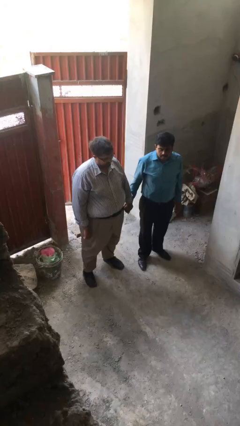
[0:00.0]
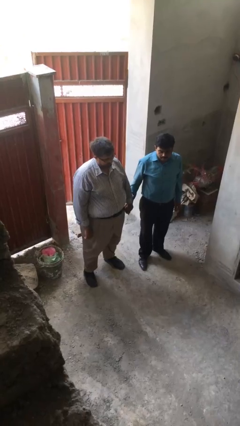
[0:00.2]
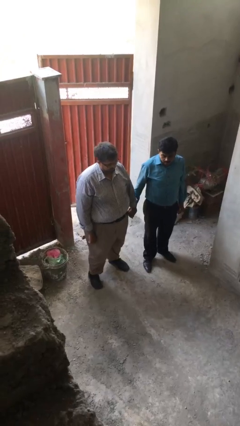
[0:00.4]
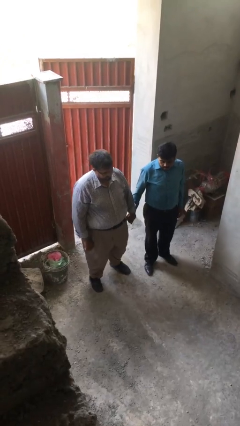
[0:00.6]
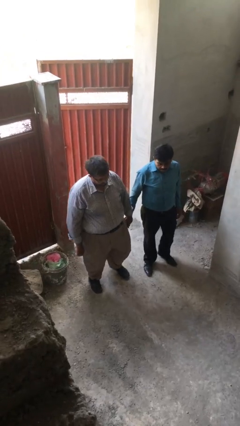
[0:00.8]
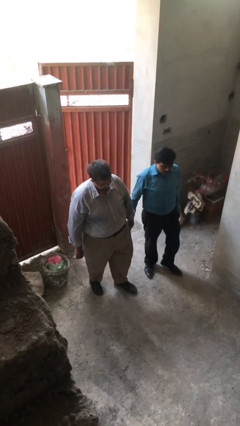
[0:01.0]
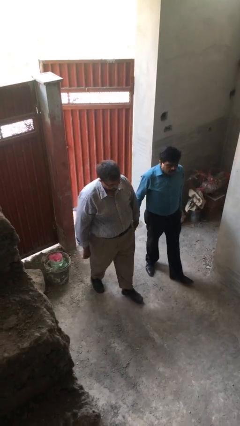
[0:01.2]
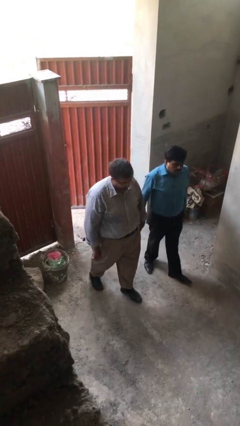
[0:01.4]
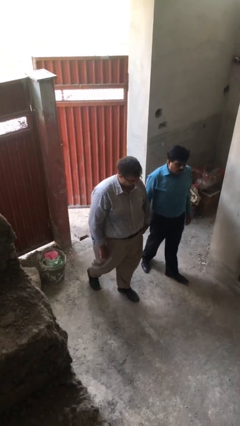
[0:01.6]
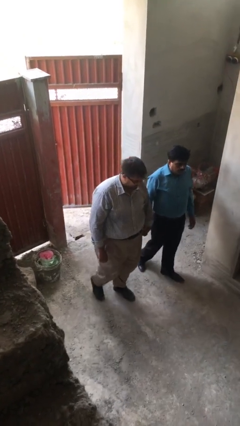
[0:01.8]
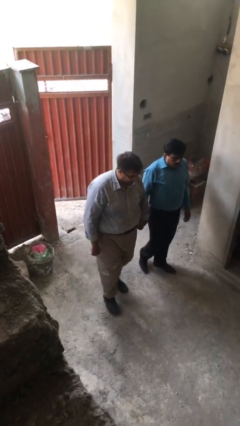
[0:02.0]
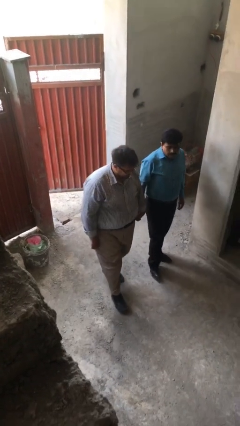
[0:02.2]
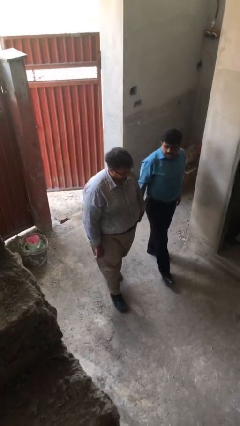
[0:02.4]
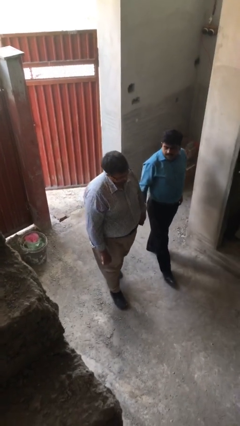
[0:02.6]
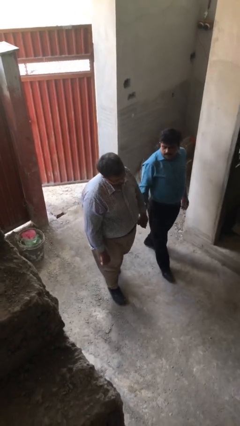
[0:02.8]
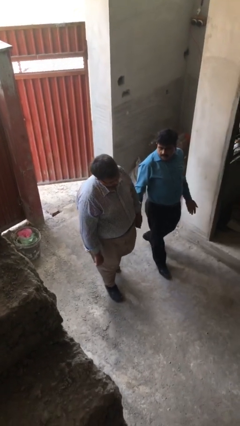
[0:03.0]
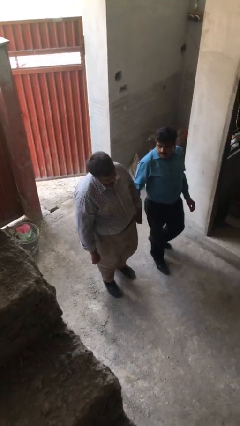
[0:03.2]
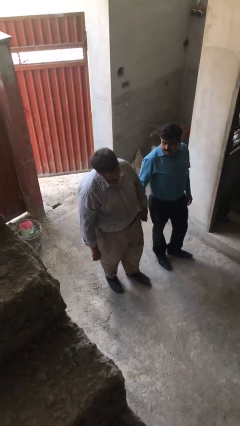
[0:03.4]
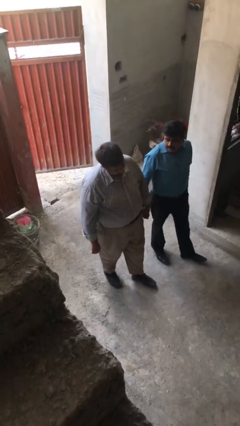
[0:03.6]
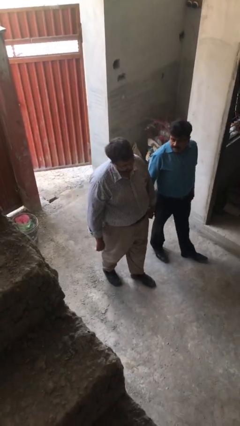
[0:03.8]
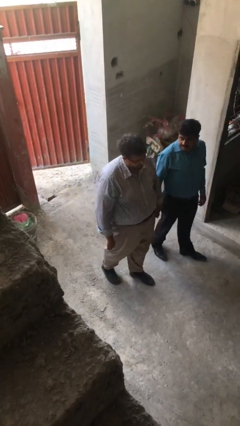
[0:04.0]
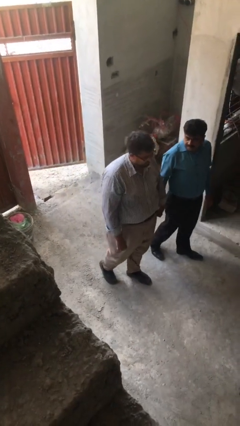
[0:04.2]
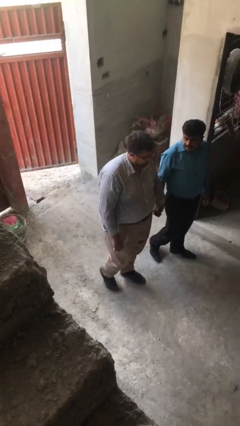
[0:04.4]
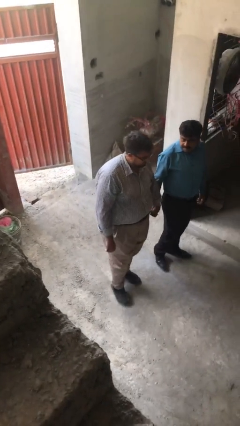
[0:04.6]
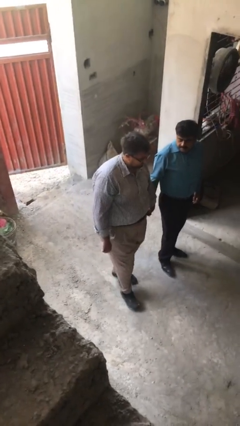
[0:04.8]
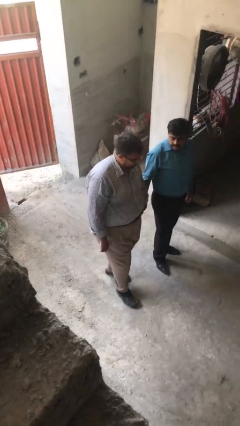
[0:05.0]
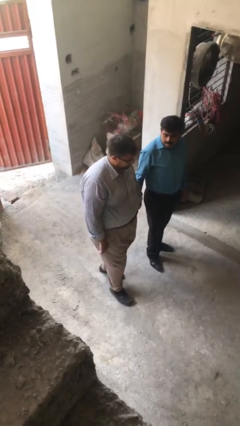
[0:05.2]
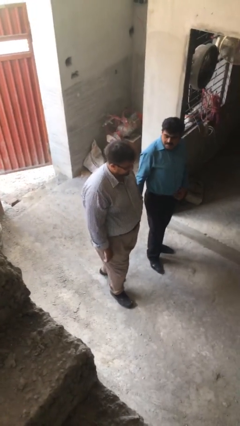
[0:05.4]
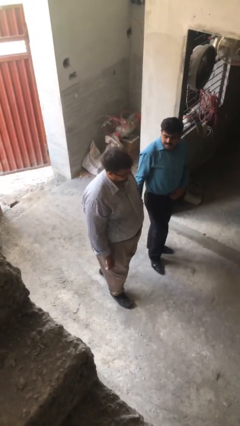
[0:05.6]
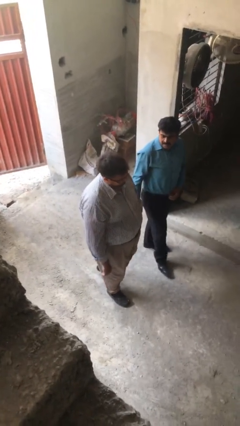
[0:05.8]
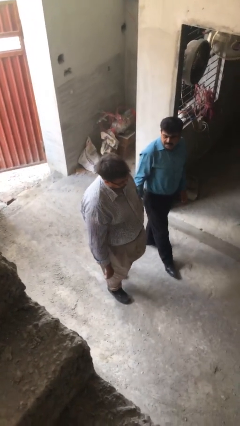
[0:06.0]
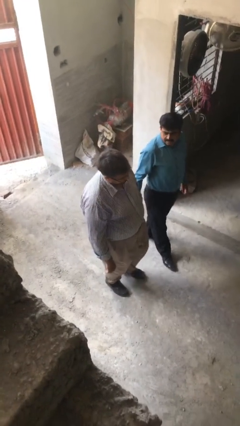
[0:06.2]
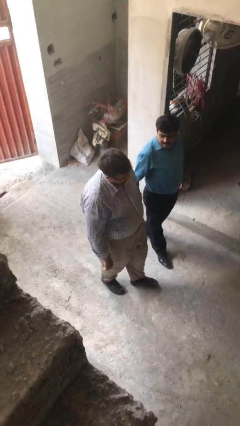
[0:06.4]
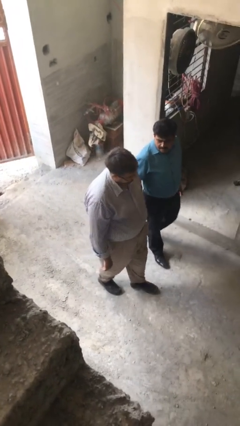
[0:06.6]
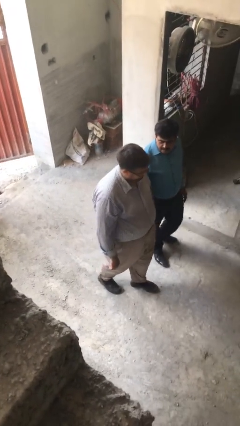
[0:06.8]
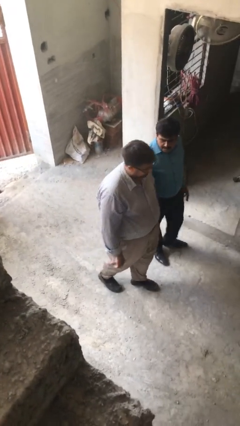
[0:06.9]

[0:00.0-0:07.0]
person holds hand

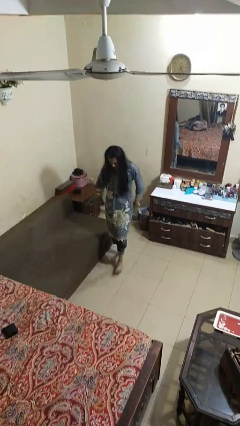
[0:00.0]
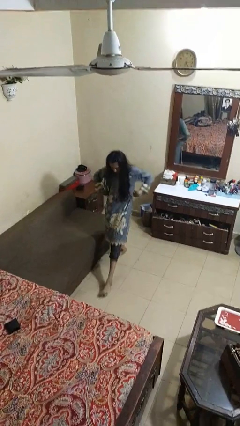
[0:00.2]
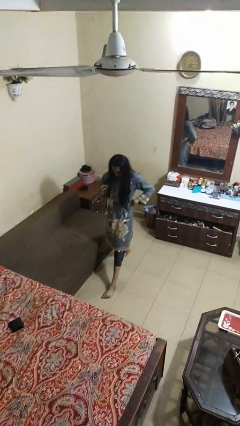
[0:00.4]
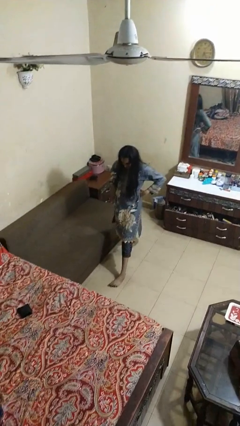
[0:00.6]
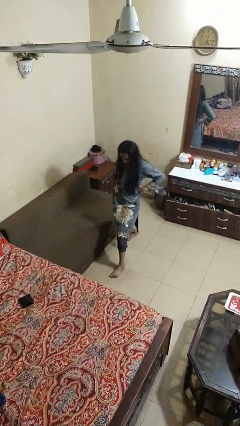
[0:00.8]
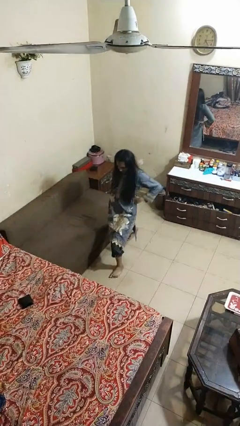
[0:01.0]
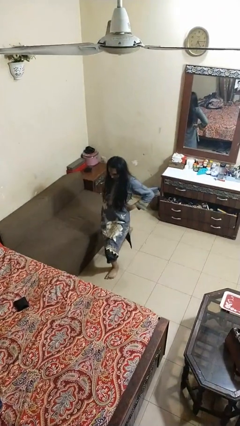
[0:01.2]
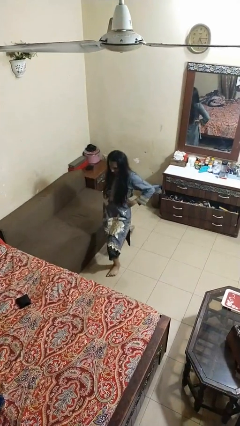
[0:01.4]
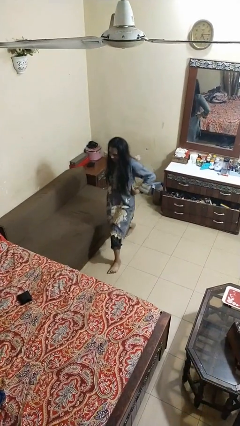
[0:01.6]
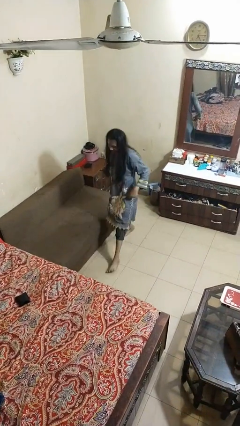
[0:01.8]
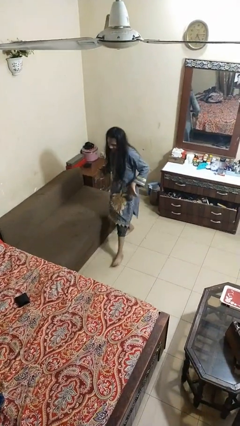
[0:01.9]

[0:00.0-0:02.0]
person exercises with lunges

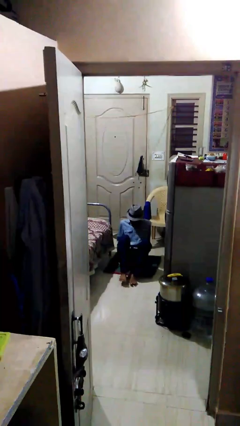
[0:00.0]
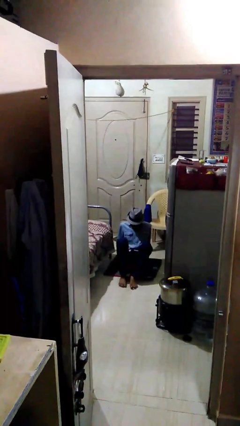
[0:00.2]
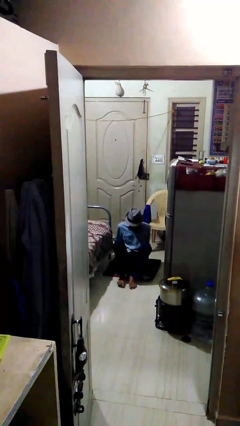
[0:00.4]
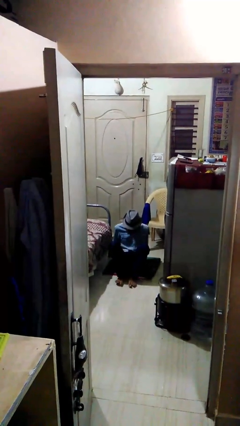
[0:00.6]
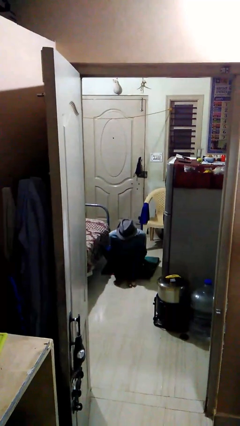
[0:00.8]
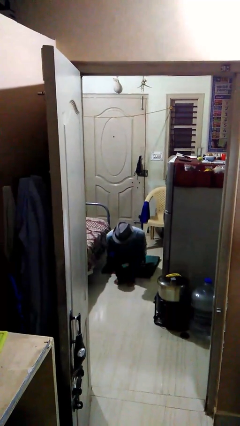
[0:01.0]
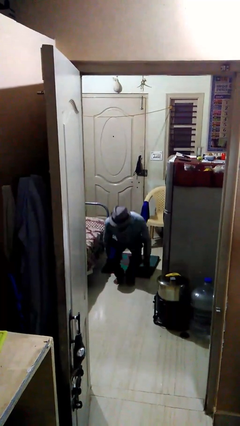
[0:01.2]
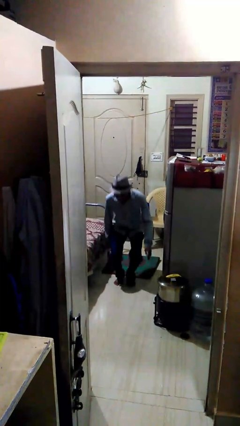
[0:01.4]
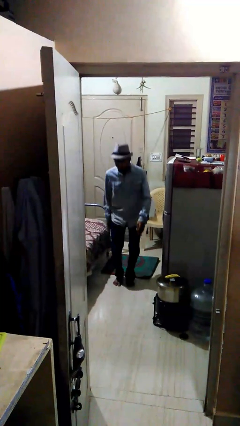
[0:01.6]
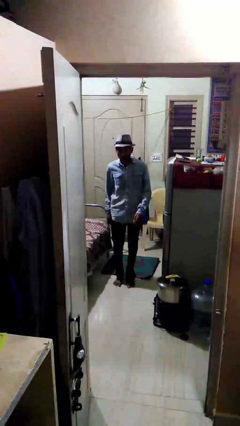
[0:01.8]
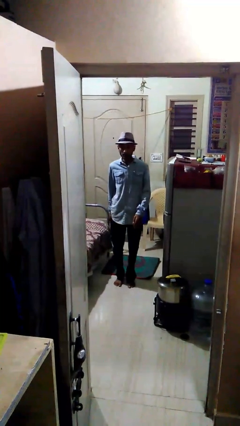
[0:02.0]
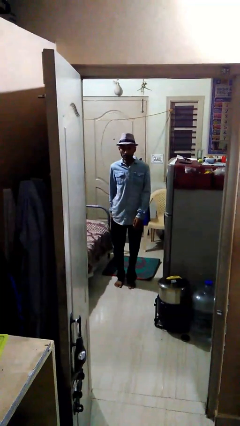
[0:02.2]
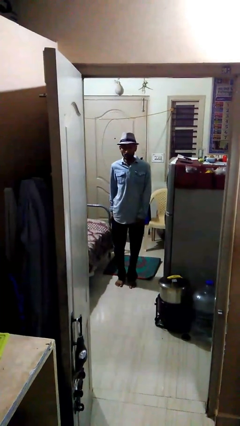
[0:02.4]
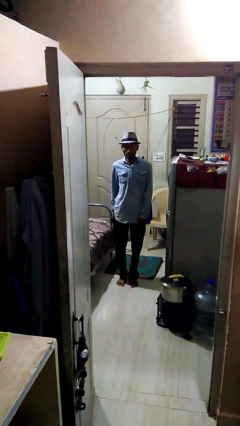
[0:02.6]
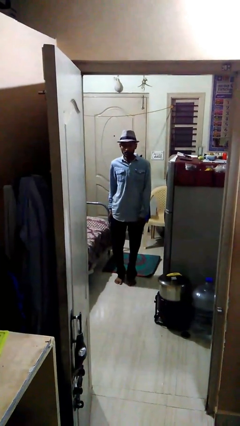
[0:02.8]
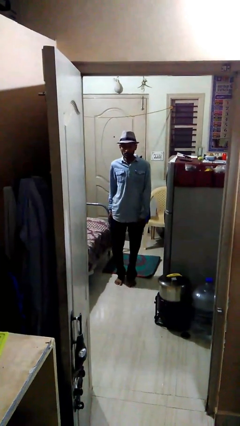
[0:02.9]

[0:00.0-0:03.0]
person stands up

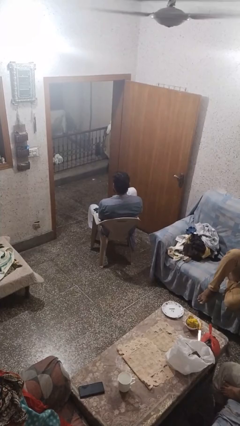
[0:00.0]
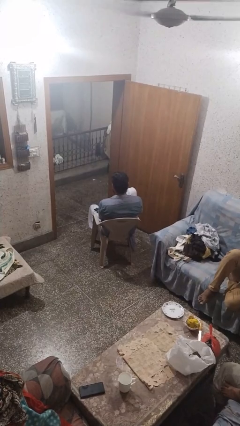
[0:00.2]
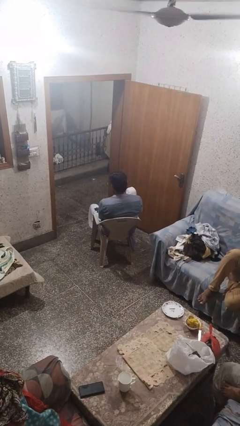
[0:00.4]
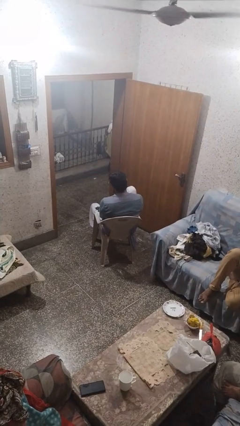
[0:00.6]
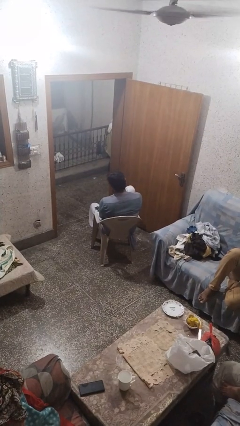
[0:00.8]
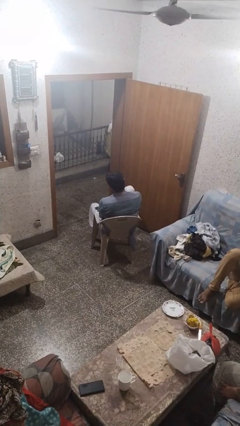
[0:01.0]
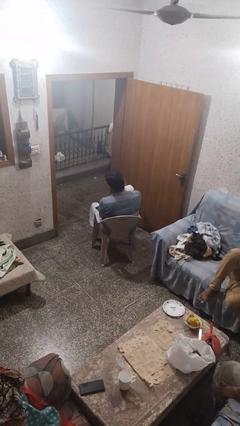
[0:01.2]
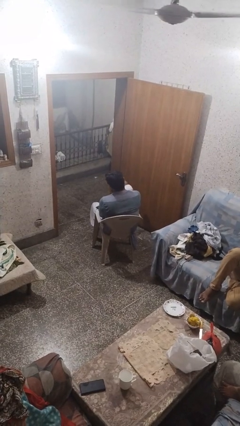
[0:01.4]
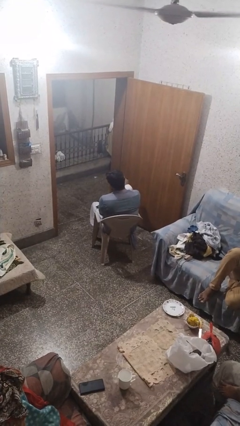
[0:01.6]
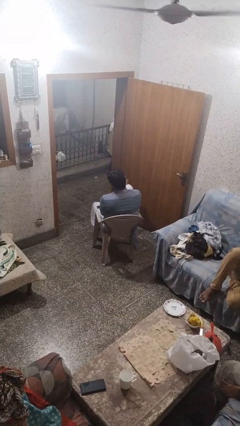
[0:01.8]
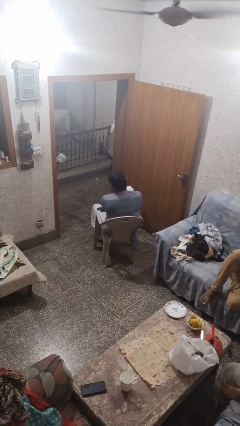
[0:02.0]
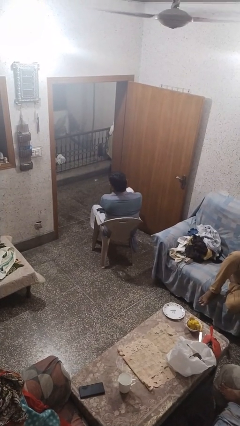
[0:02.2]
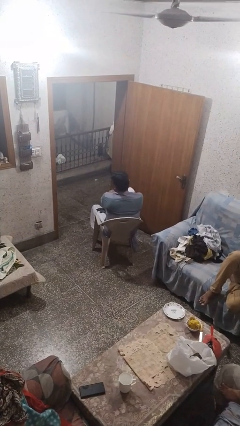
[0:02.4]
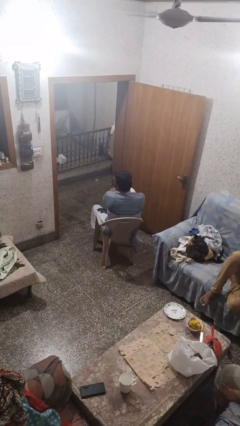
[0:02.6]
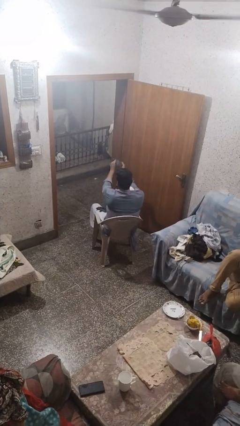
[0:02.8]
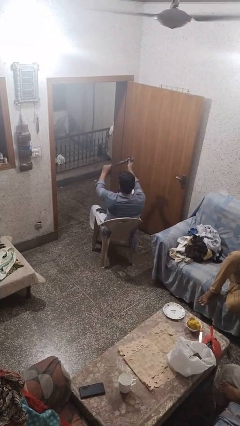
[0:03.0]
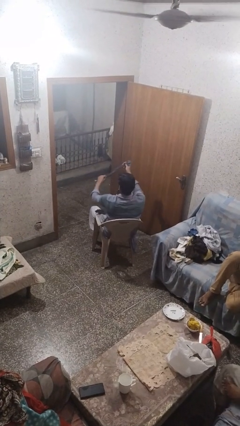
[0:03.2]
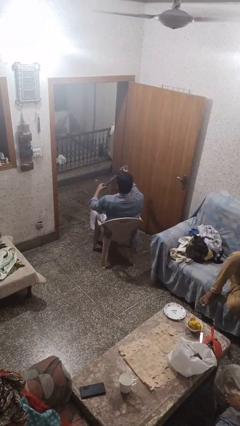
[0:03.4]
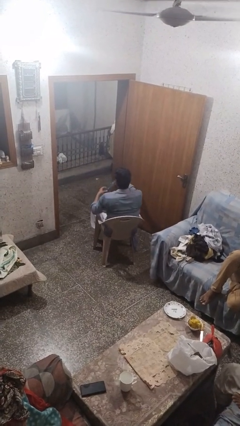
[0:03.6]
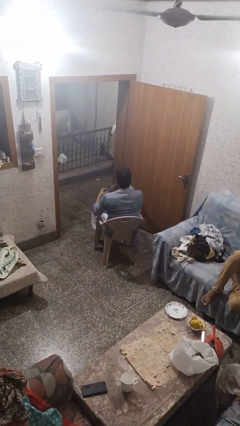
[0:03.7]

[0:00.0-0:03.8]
person takes off socks

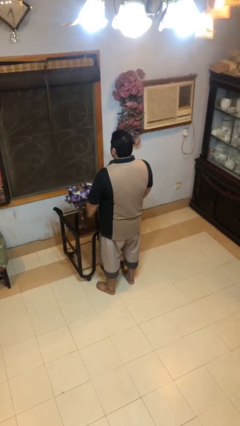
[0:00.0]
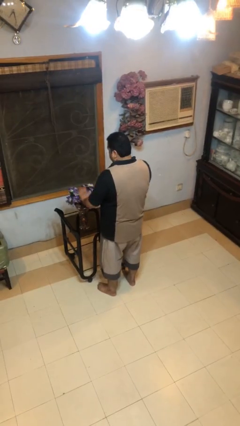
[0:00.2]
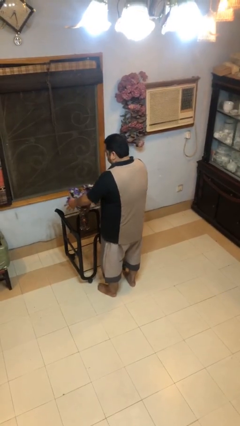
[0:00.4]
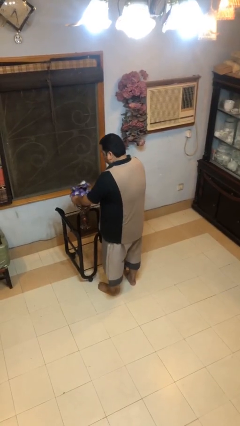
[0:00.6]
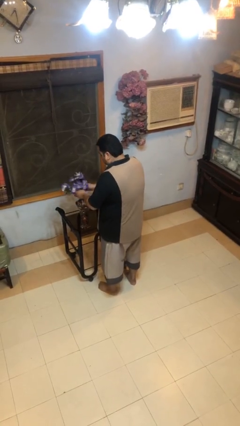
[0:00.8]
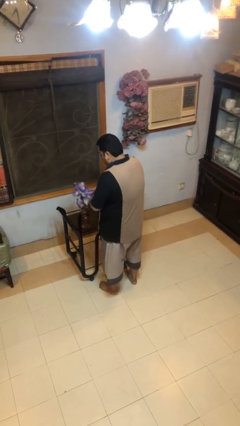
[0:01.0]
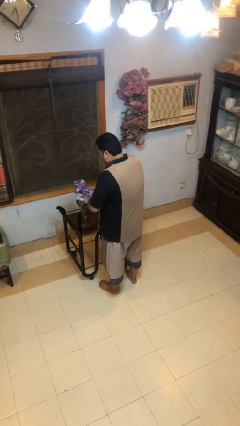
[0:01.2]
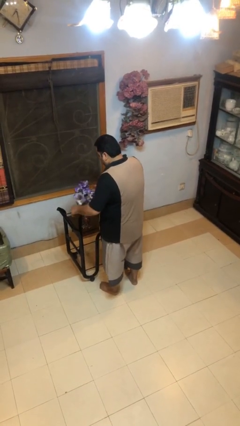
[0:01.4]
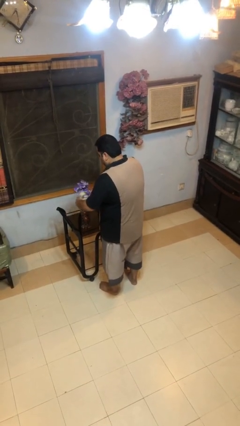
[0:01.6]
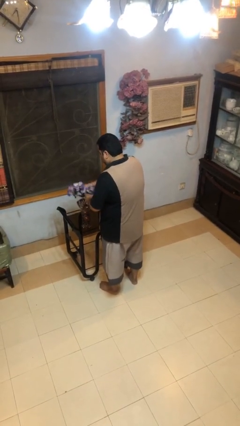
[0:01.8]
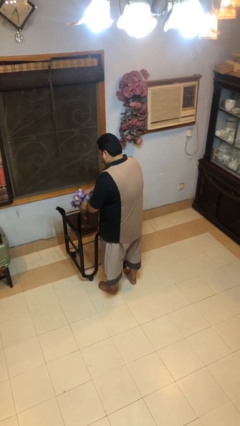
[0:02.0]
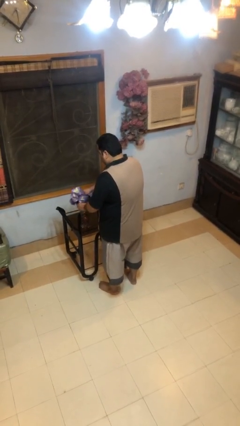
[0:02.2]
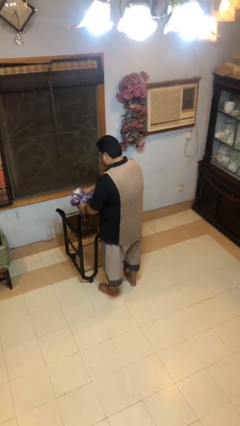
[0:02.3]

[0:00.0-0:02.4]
person arranges flowers in vase
